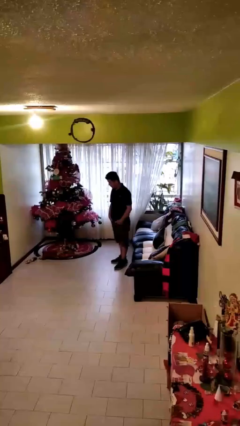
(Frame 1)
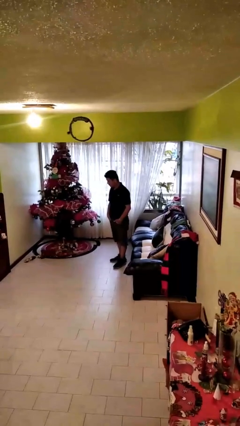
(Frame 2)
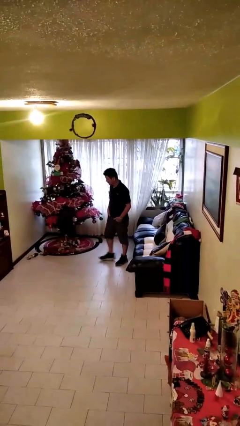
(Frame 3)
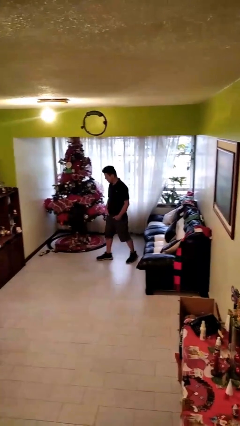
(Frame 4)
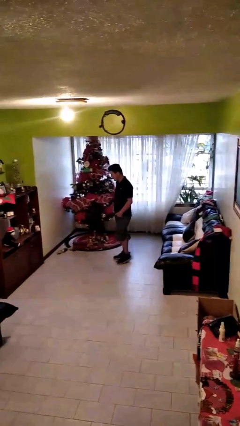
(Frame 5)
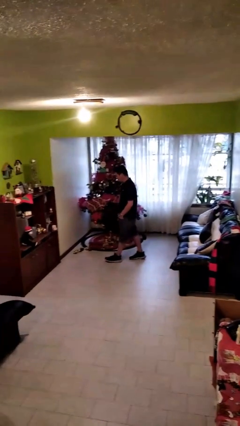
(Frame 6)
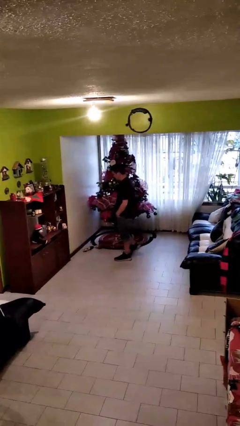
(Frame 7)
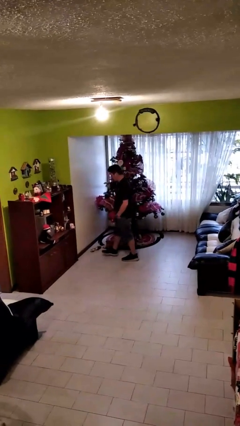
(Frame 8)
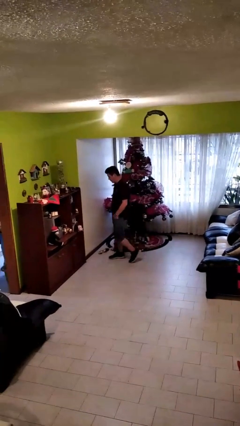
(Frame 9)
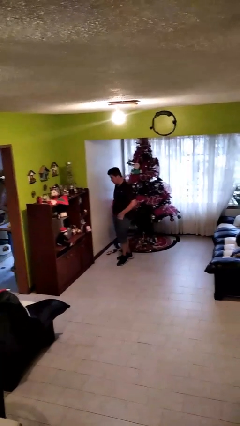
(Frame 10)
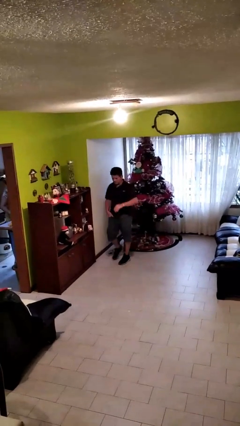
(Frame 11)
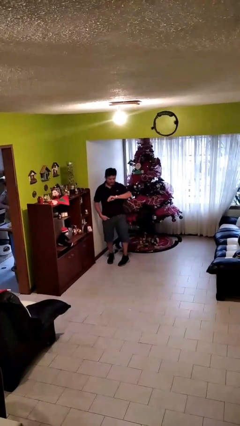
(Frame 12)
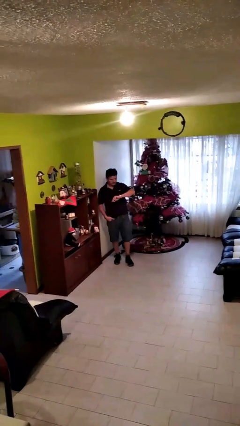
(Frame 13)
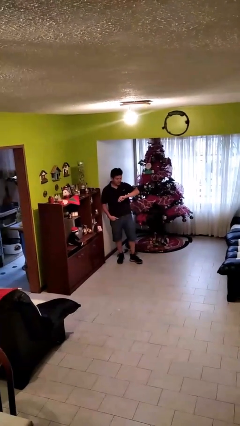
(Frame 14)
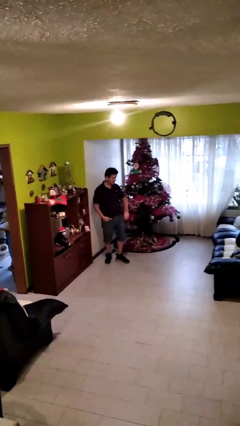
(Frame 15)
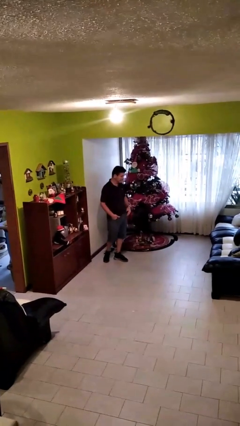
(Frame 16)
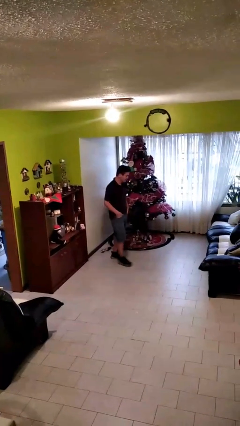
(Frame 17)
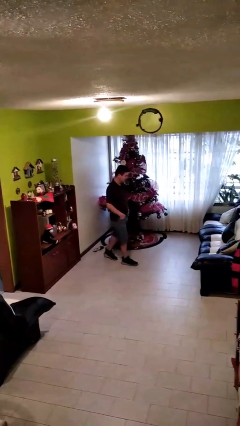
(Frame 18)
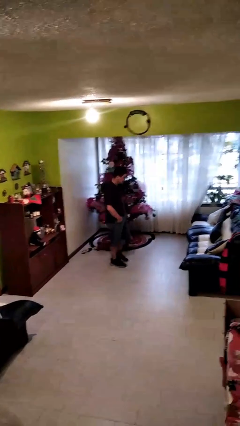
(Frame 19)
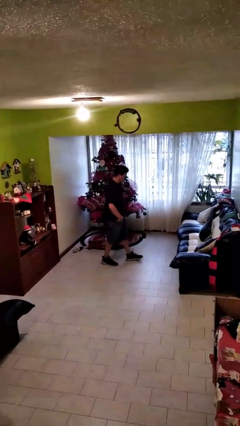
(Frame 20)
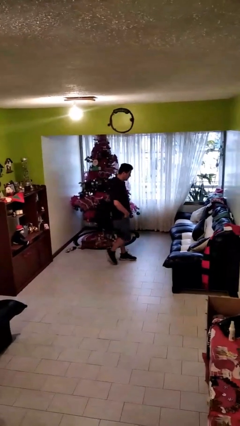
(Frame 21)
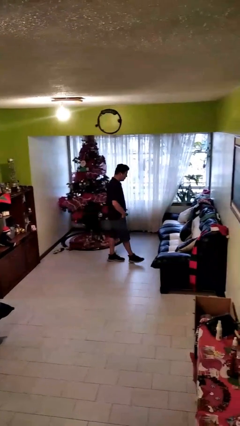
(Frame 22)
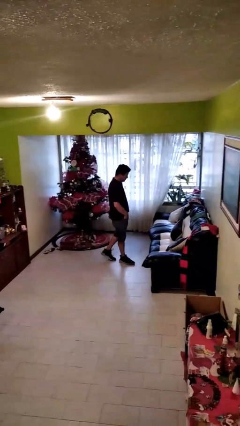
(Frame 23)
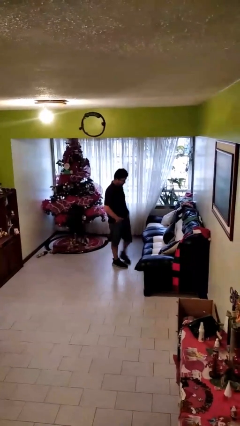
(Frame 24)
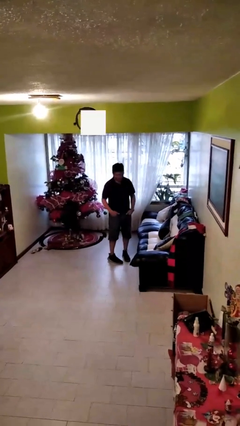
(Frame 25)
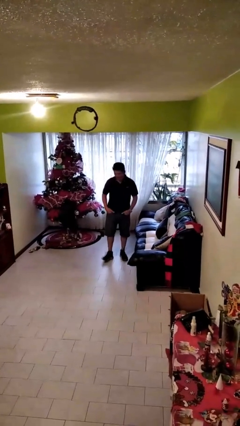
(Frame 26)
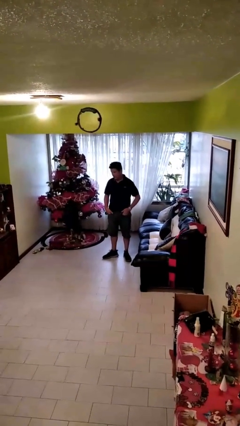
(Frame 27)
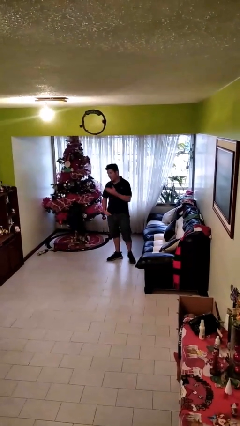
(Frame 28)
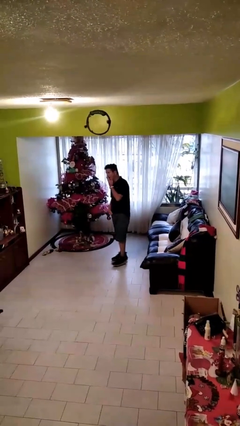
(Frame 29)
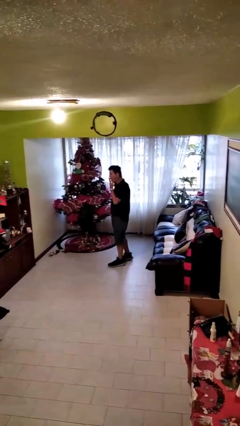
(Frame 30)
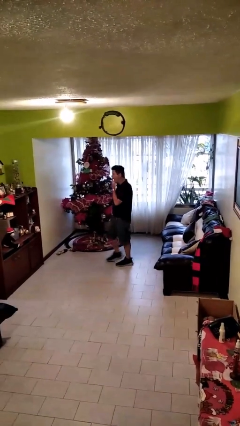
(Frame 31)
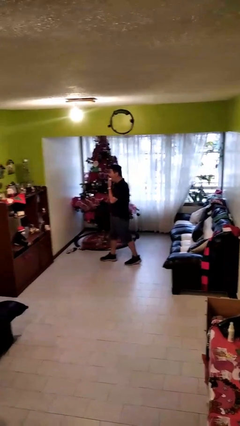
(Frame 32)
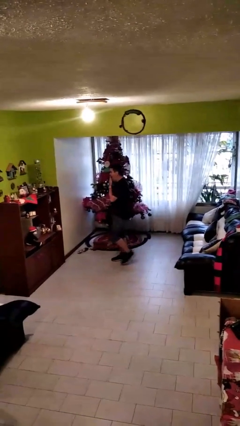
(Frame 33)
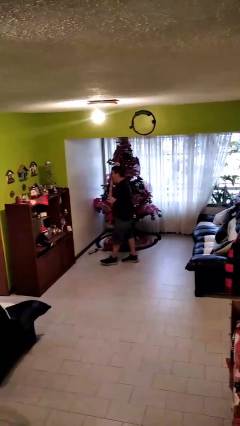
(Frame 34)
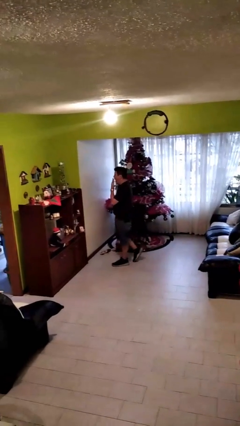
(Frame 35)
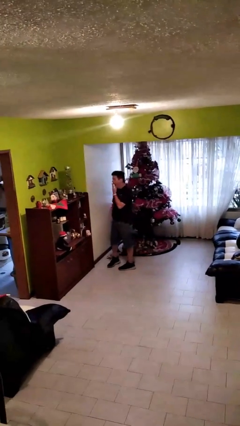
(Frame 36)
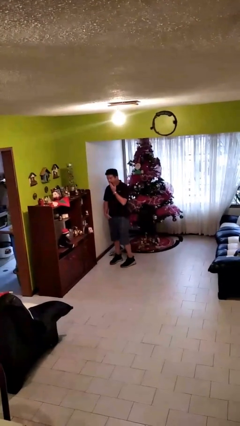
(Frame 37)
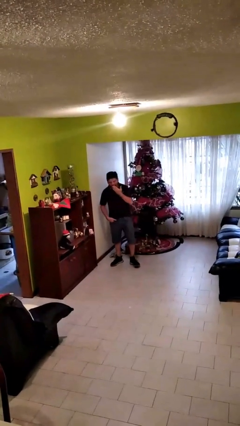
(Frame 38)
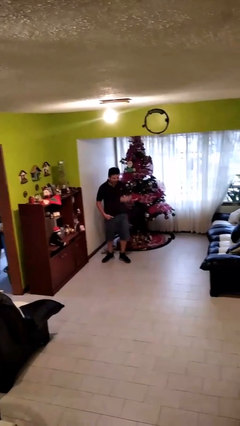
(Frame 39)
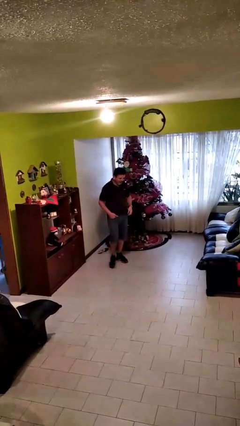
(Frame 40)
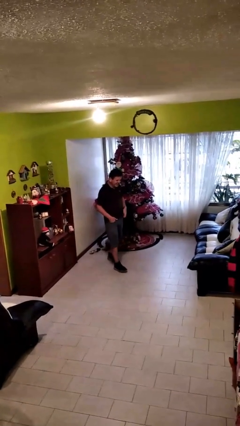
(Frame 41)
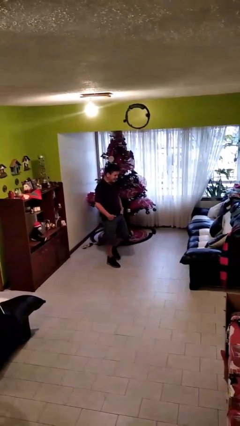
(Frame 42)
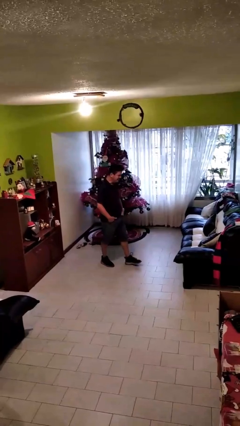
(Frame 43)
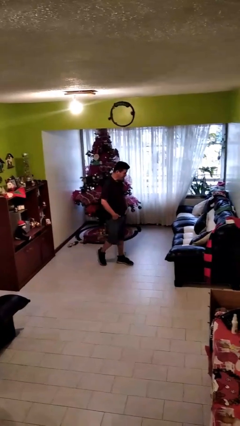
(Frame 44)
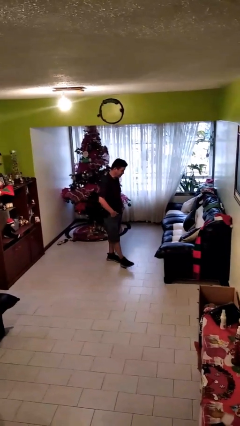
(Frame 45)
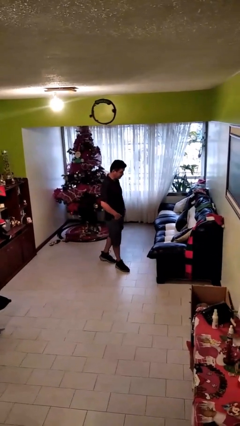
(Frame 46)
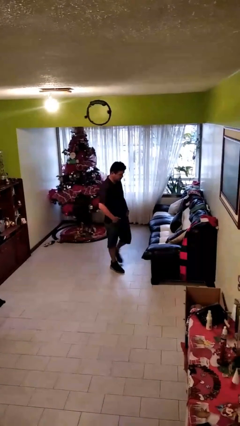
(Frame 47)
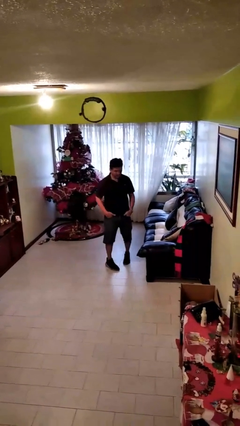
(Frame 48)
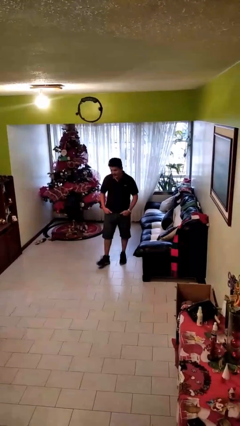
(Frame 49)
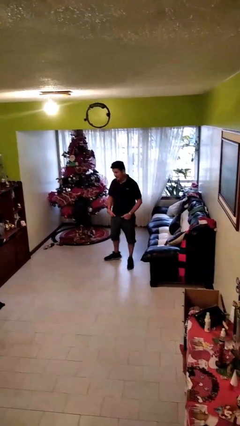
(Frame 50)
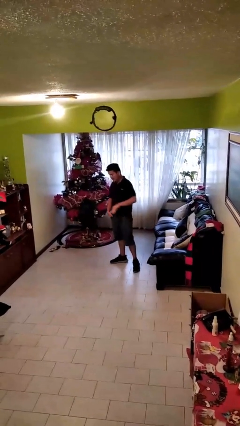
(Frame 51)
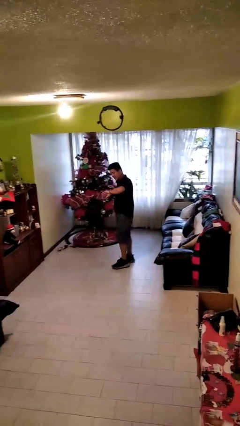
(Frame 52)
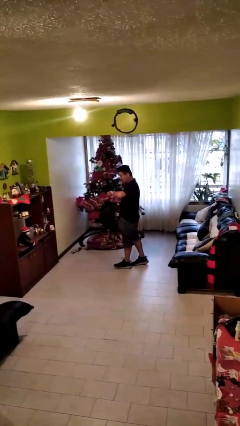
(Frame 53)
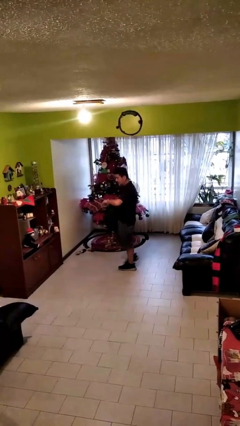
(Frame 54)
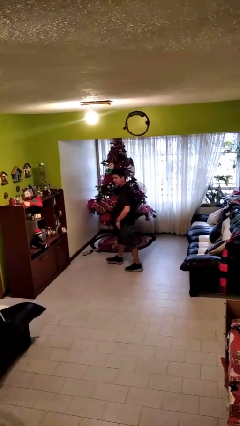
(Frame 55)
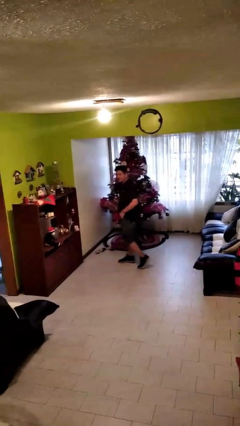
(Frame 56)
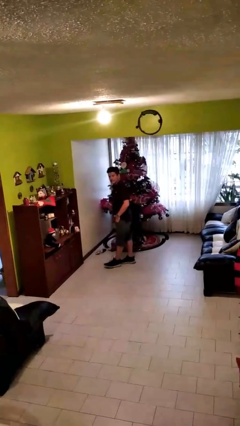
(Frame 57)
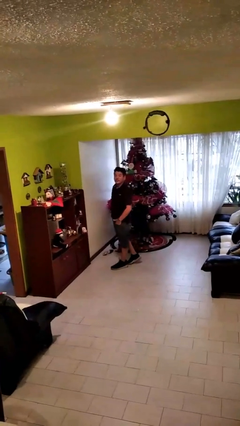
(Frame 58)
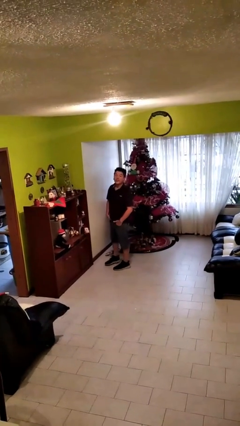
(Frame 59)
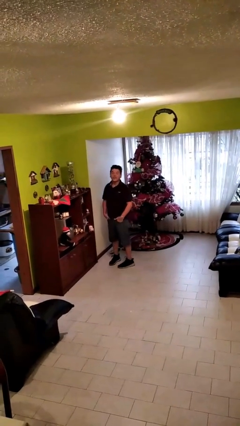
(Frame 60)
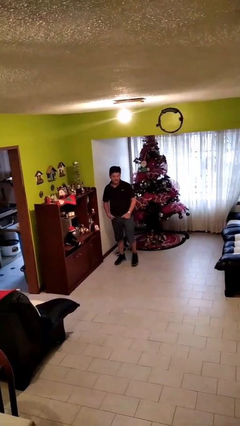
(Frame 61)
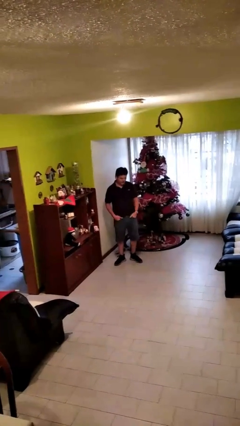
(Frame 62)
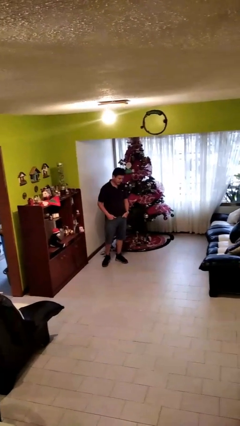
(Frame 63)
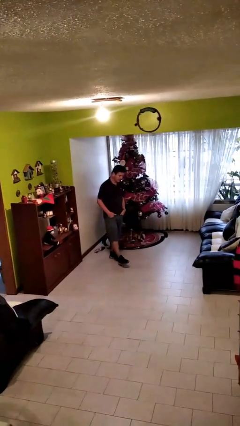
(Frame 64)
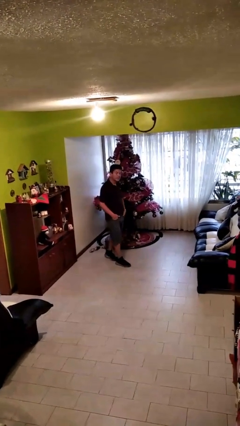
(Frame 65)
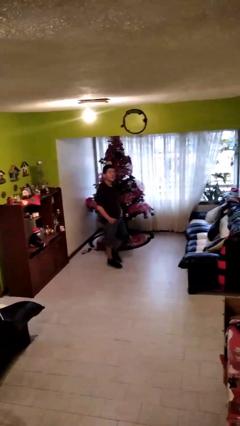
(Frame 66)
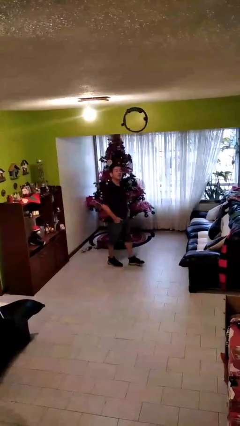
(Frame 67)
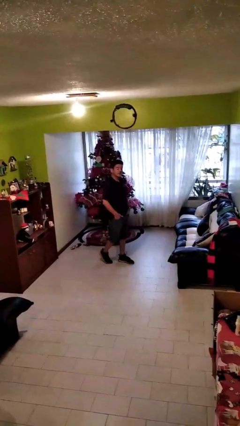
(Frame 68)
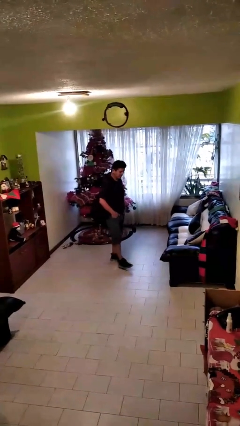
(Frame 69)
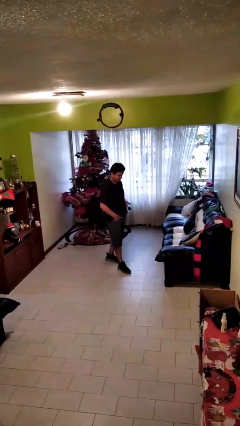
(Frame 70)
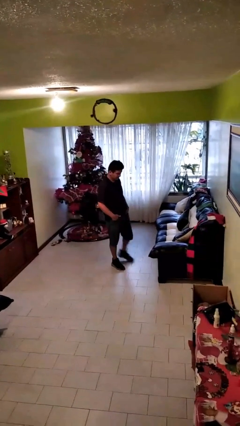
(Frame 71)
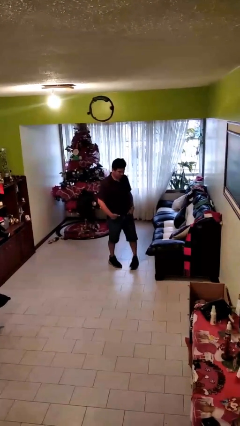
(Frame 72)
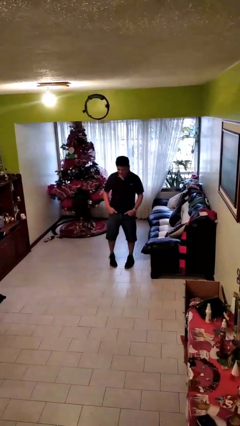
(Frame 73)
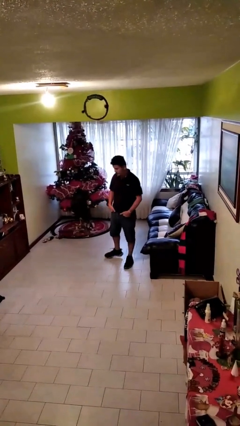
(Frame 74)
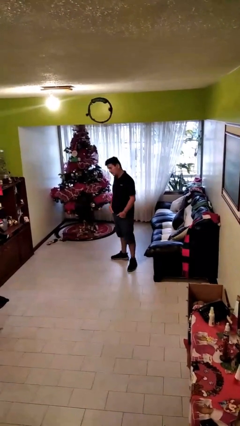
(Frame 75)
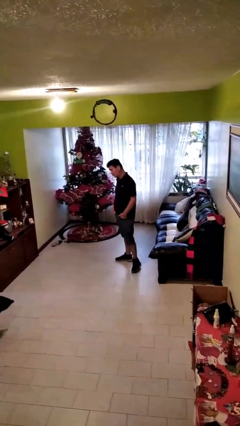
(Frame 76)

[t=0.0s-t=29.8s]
person walks

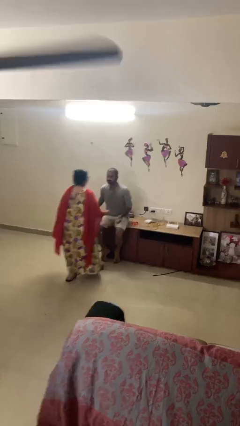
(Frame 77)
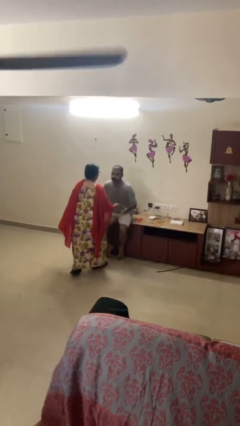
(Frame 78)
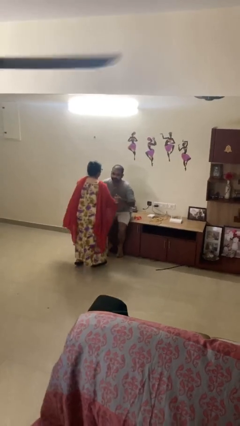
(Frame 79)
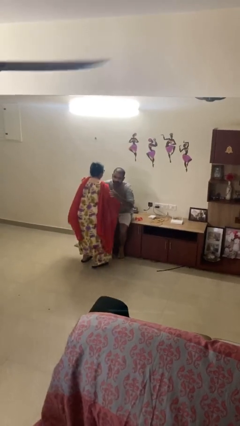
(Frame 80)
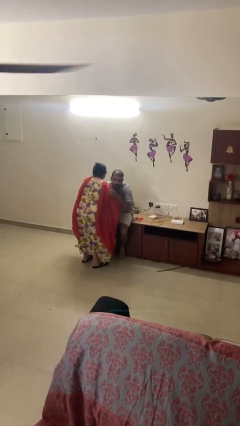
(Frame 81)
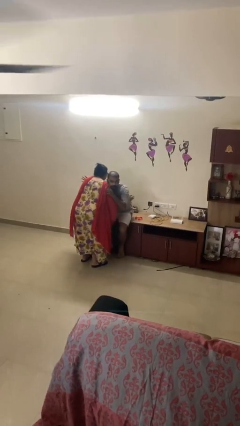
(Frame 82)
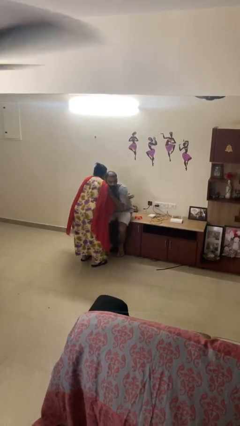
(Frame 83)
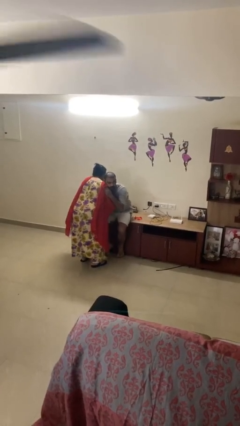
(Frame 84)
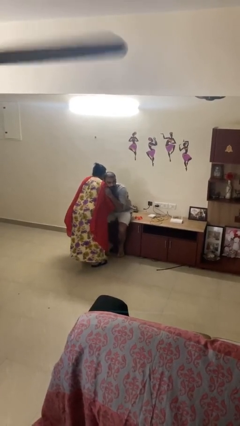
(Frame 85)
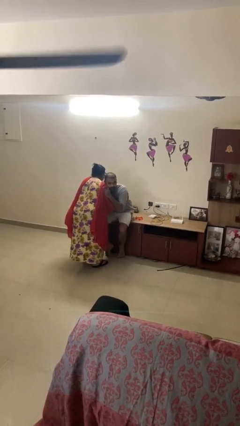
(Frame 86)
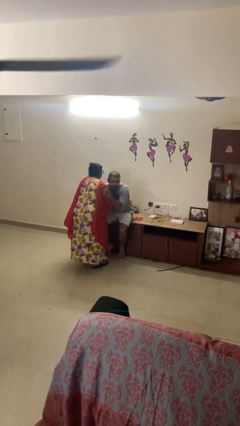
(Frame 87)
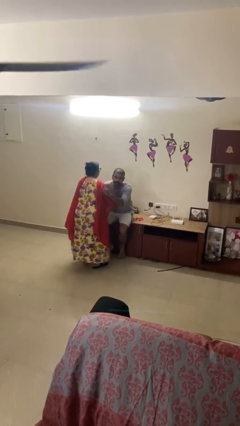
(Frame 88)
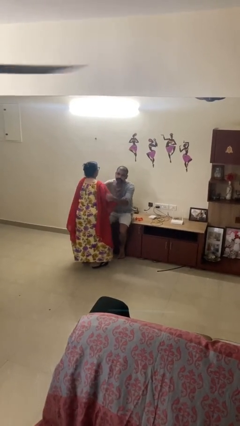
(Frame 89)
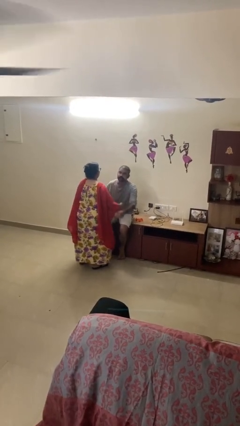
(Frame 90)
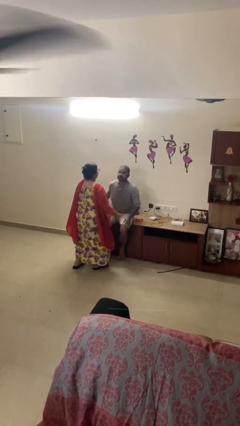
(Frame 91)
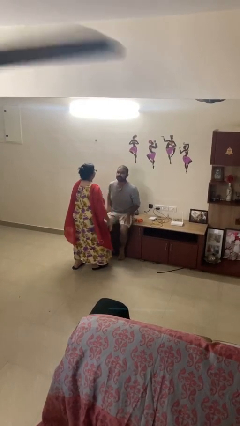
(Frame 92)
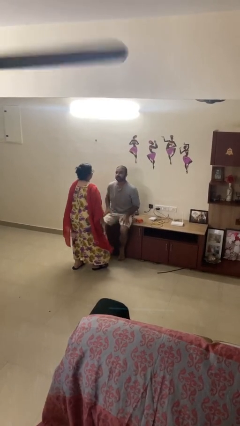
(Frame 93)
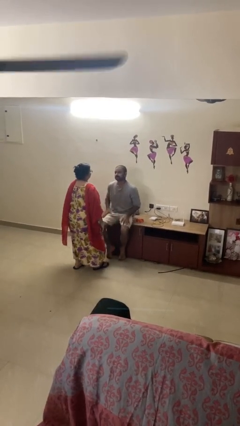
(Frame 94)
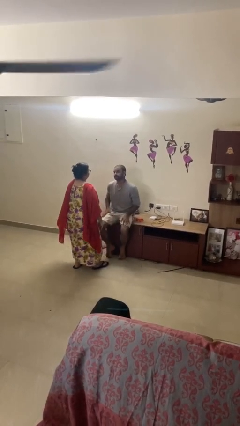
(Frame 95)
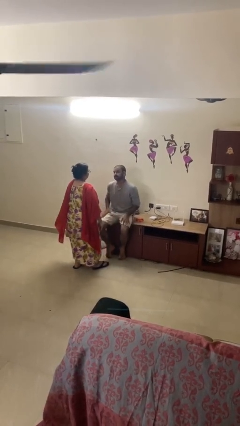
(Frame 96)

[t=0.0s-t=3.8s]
person embraces person
